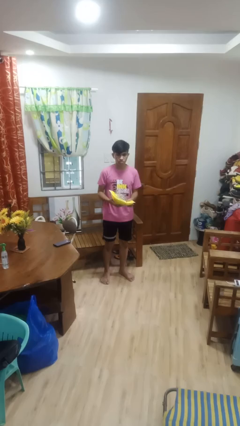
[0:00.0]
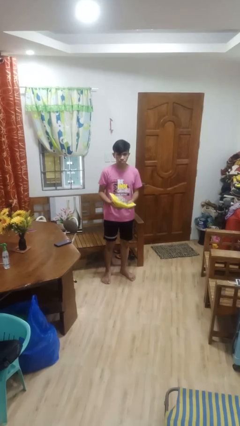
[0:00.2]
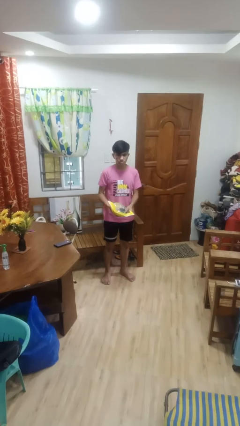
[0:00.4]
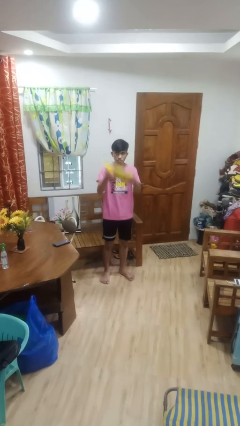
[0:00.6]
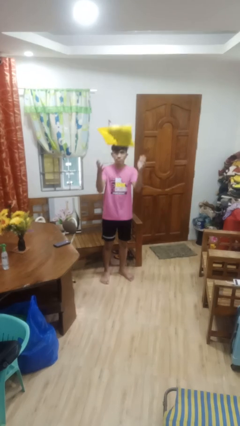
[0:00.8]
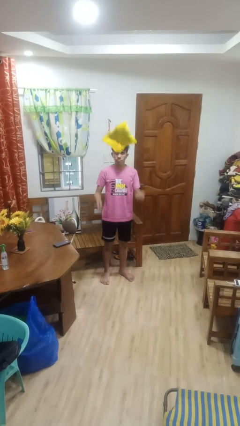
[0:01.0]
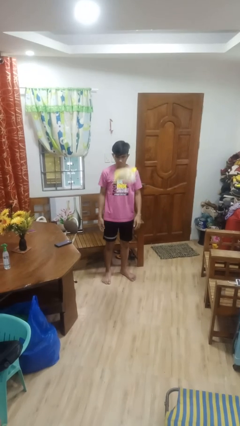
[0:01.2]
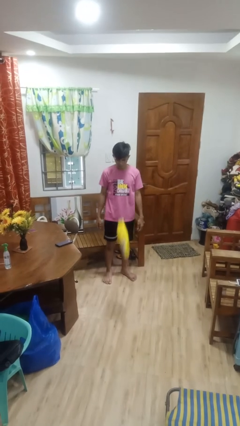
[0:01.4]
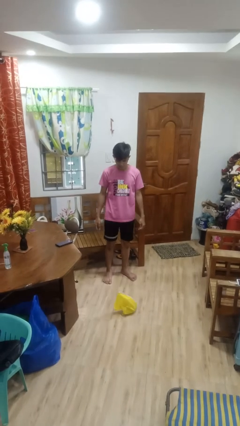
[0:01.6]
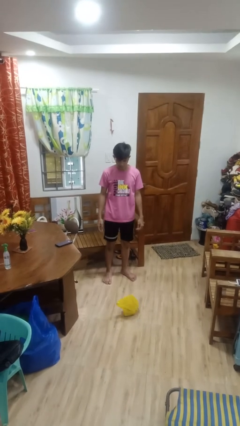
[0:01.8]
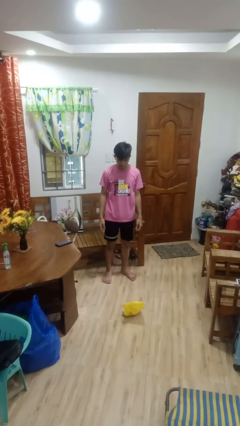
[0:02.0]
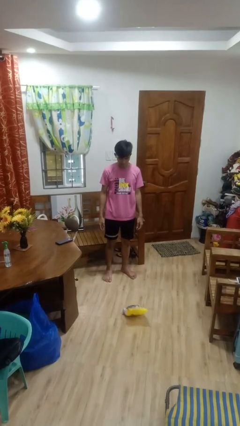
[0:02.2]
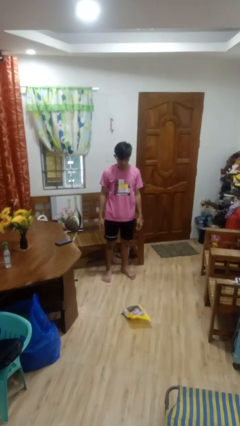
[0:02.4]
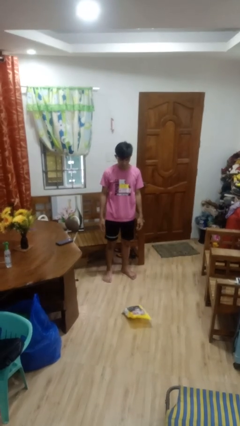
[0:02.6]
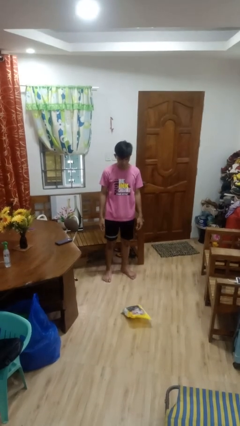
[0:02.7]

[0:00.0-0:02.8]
person throws object into air

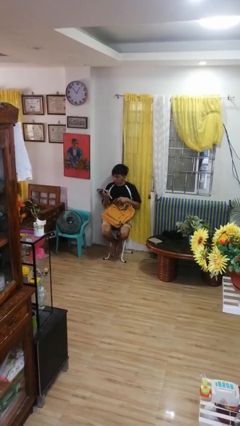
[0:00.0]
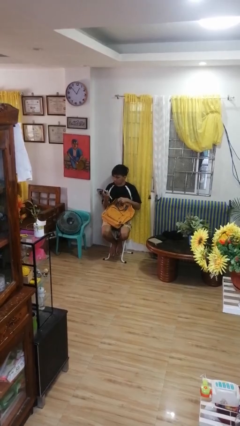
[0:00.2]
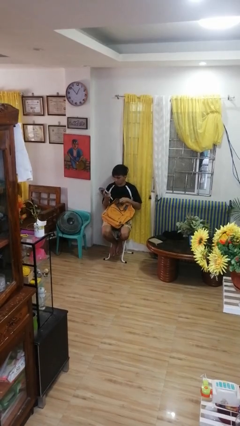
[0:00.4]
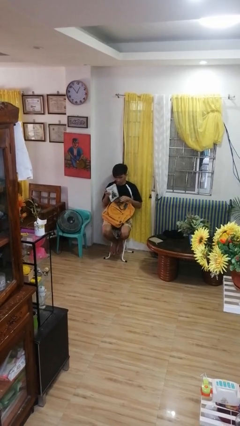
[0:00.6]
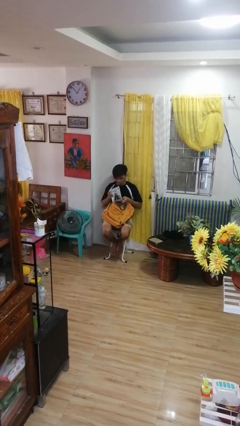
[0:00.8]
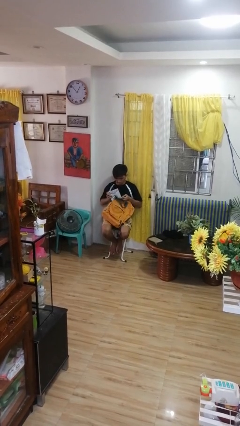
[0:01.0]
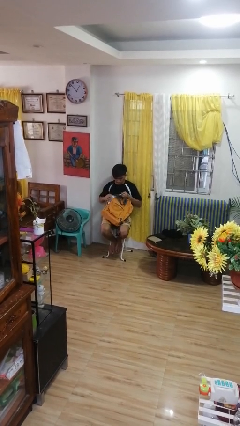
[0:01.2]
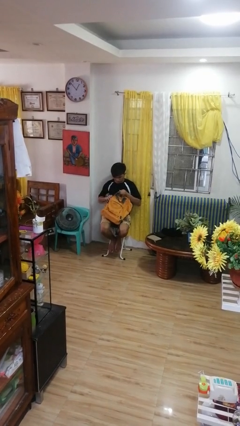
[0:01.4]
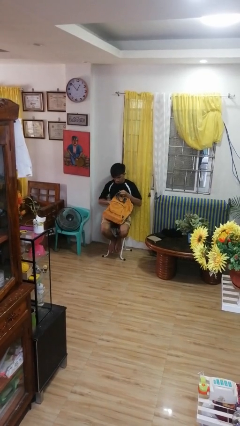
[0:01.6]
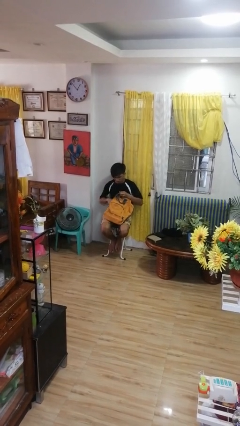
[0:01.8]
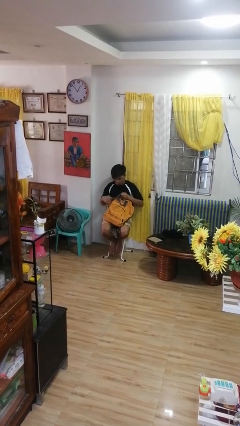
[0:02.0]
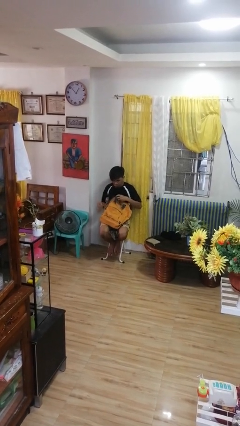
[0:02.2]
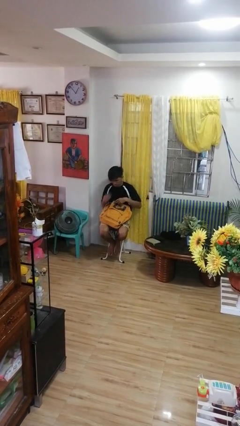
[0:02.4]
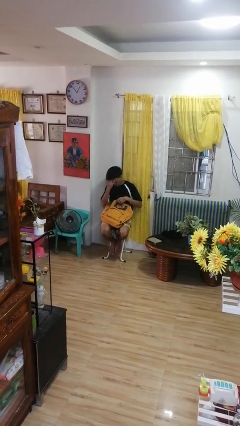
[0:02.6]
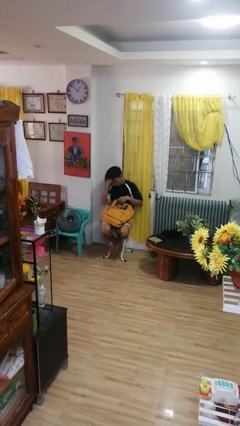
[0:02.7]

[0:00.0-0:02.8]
person puts object into backpack

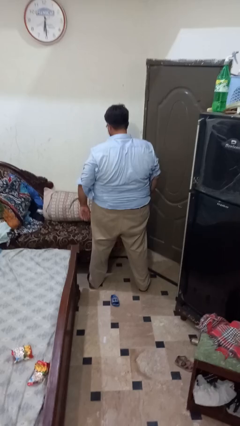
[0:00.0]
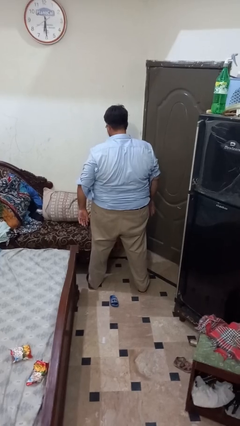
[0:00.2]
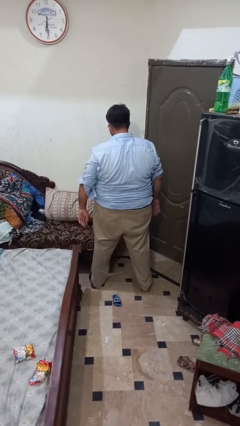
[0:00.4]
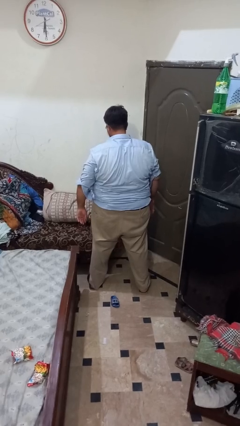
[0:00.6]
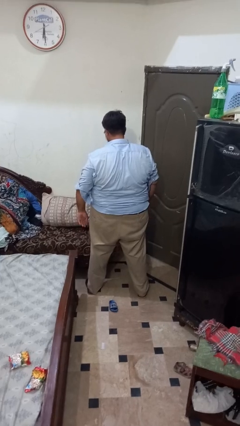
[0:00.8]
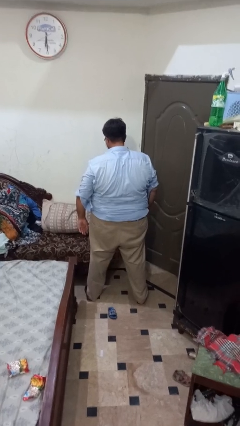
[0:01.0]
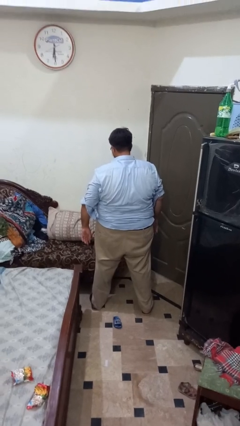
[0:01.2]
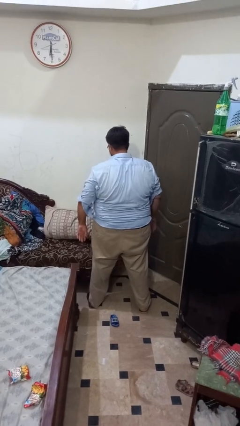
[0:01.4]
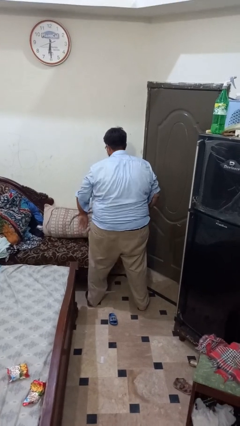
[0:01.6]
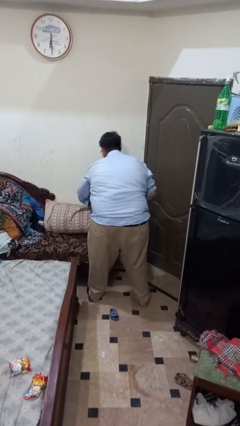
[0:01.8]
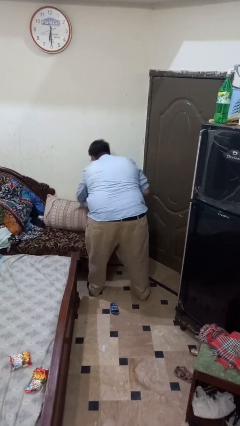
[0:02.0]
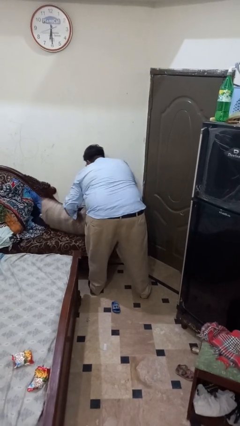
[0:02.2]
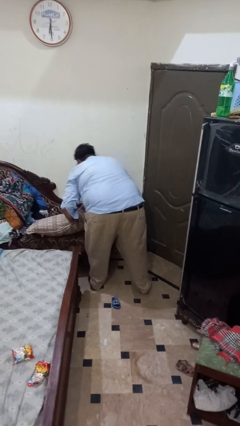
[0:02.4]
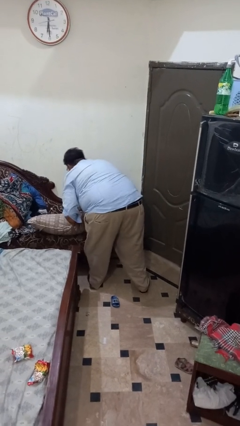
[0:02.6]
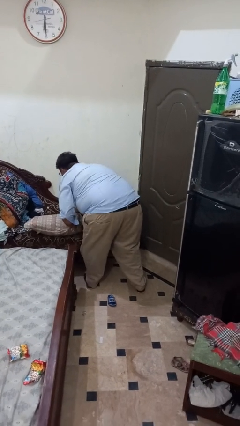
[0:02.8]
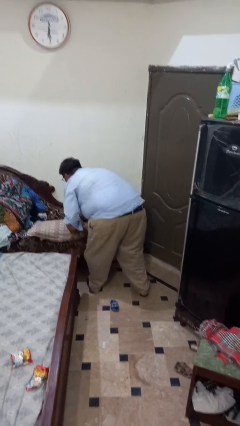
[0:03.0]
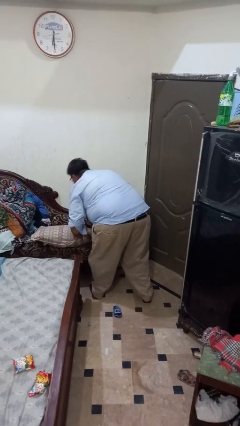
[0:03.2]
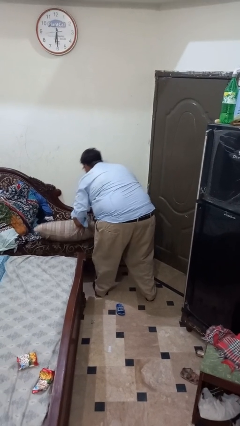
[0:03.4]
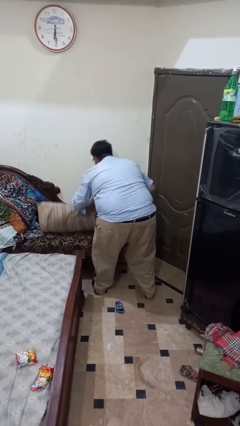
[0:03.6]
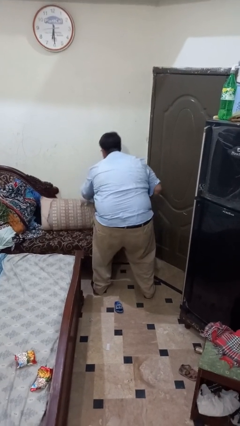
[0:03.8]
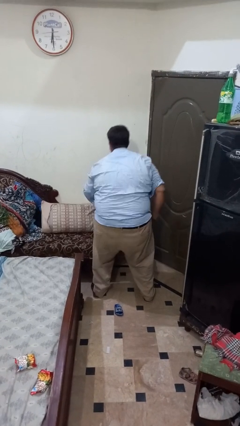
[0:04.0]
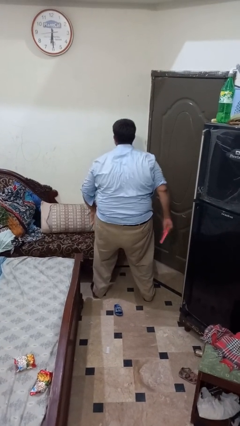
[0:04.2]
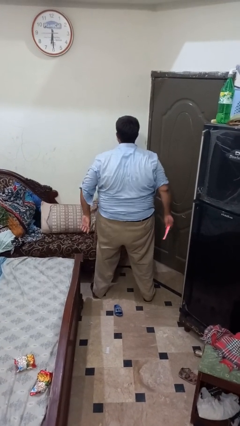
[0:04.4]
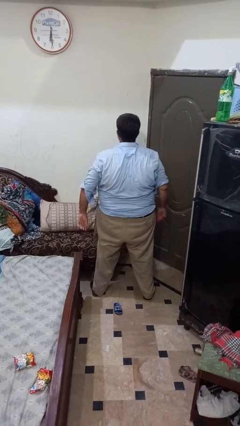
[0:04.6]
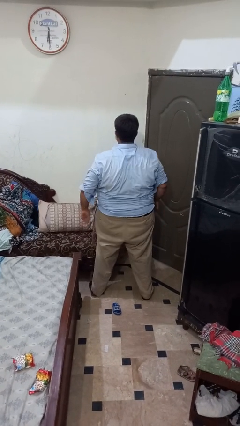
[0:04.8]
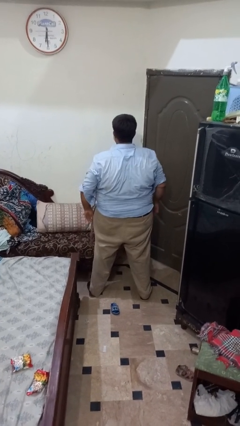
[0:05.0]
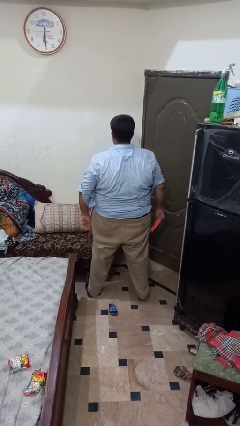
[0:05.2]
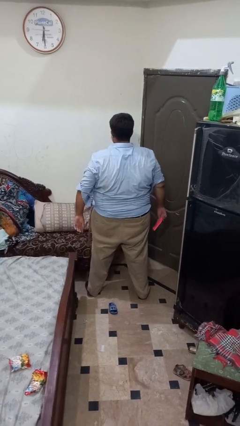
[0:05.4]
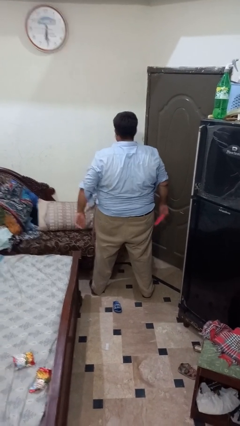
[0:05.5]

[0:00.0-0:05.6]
person searches in couch

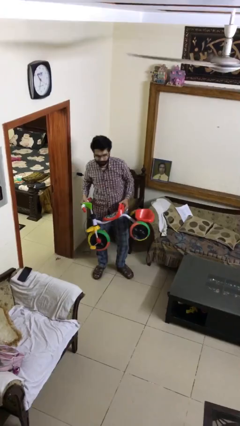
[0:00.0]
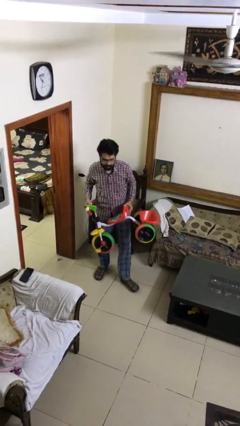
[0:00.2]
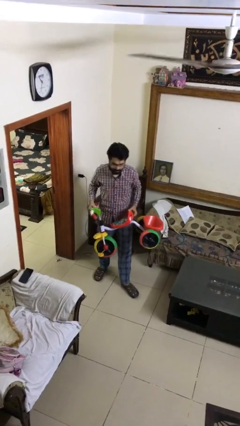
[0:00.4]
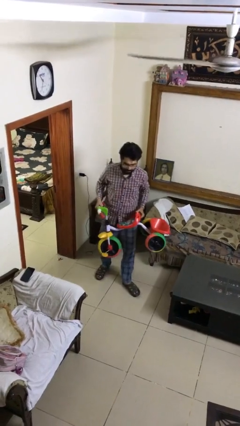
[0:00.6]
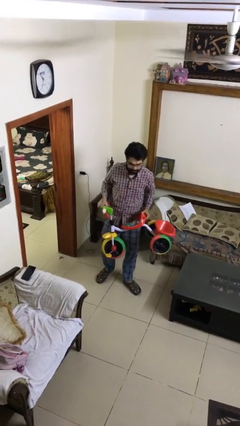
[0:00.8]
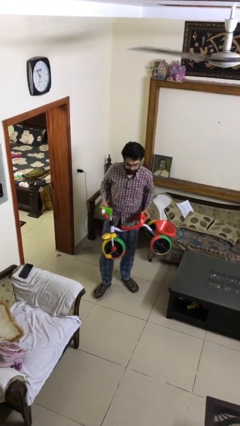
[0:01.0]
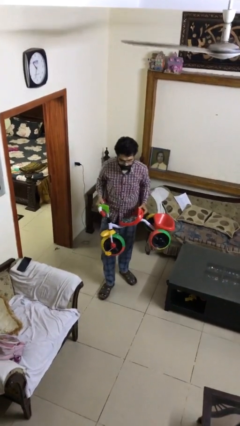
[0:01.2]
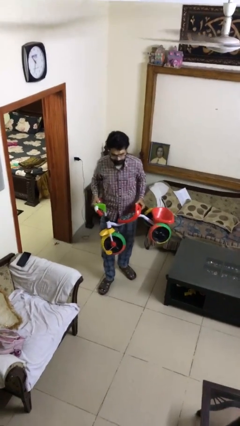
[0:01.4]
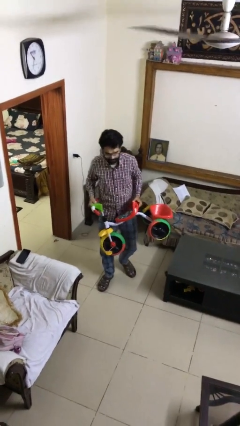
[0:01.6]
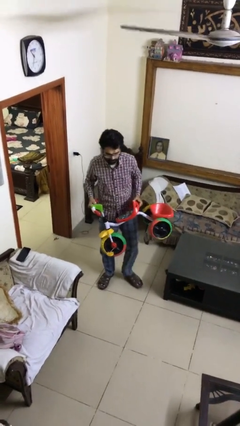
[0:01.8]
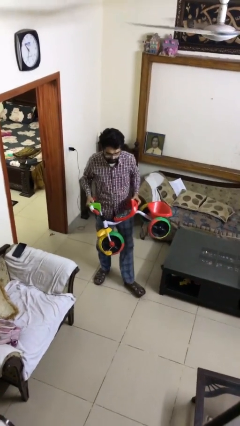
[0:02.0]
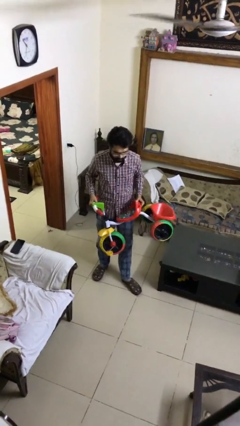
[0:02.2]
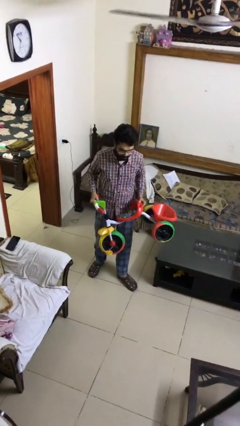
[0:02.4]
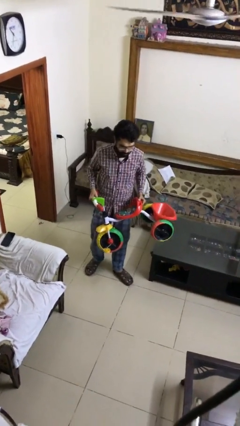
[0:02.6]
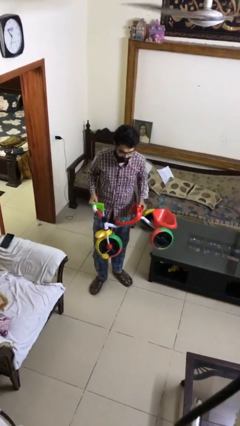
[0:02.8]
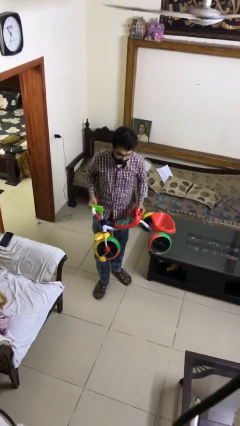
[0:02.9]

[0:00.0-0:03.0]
person carries heavy object

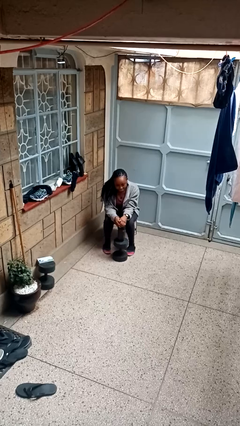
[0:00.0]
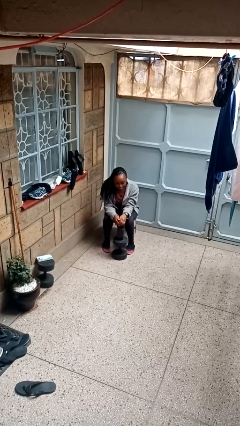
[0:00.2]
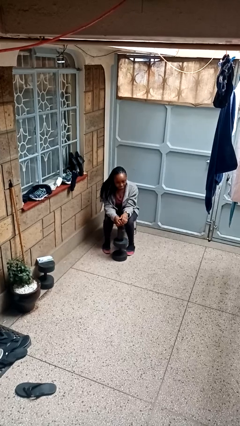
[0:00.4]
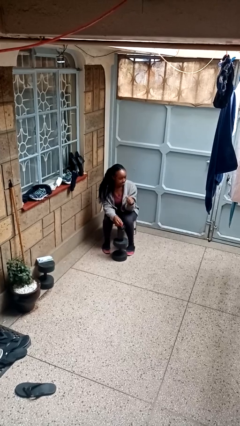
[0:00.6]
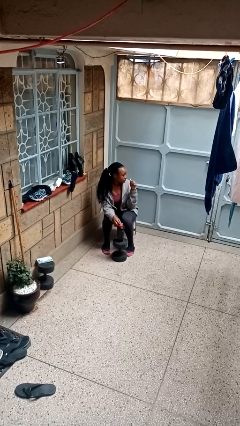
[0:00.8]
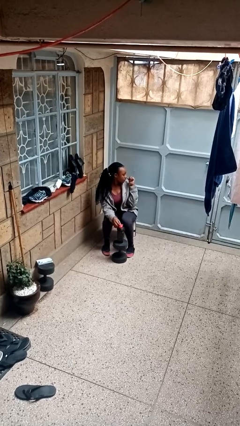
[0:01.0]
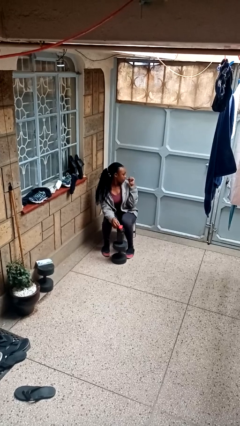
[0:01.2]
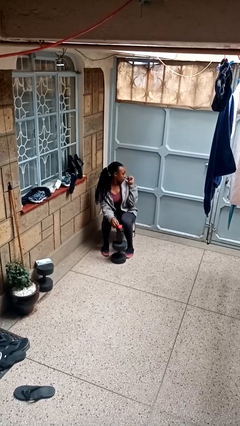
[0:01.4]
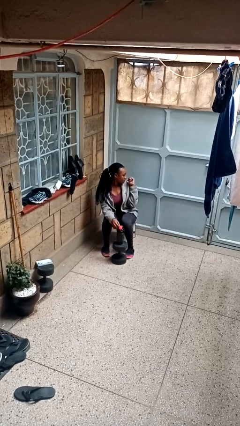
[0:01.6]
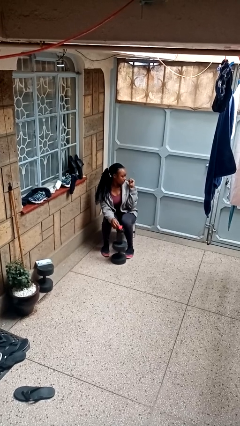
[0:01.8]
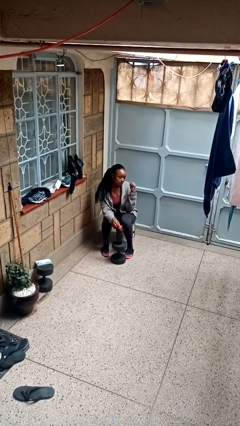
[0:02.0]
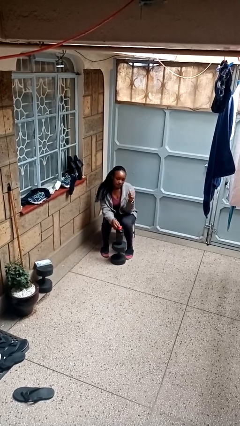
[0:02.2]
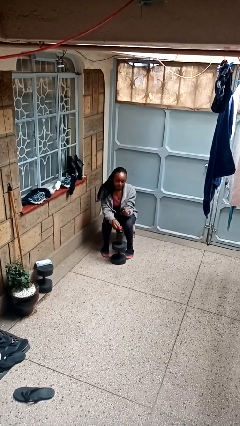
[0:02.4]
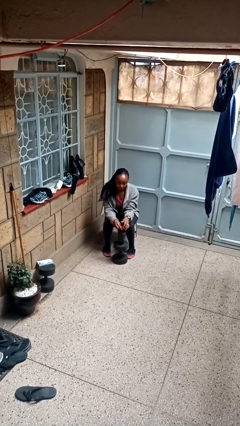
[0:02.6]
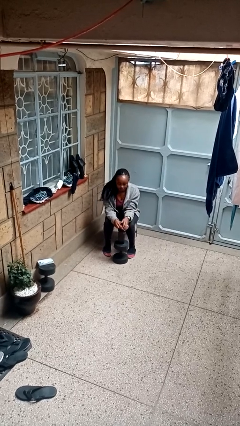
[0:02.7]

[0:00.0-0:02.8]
person gestures behind me

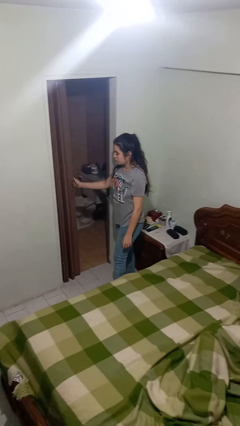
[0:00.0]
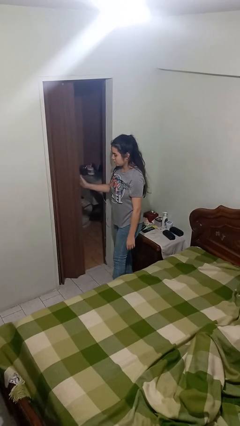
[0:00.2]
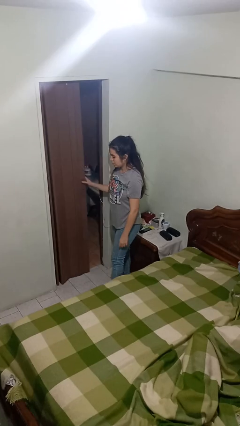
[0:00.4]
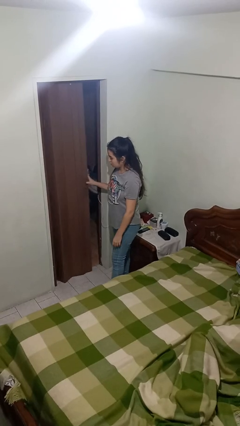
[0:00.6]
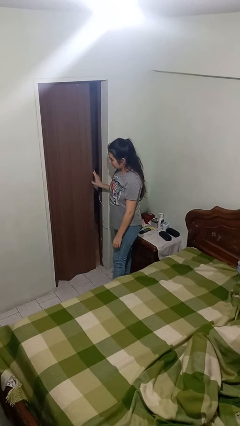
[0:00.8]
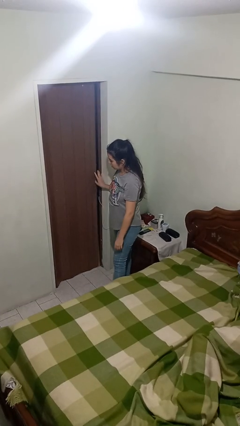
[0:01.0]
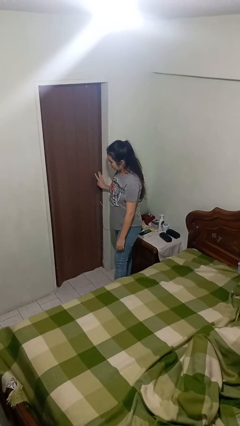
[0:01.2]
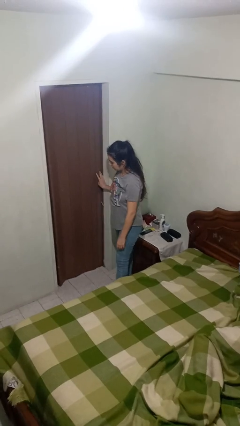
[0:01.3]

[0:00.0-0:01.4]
person closes sliding door
